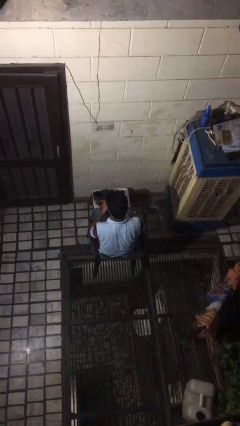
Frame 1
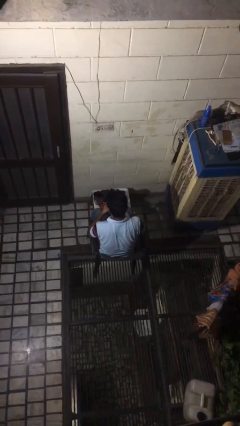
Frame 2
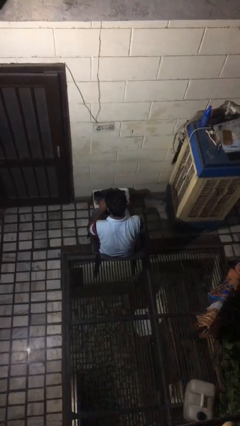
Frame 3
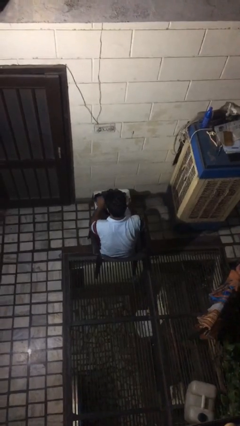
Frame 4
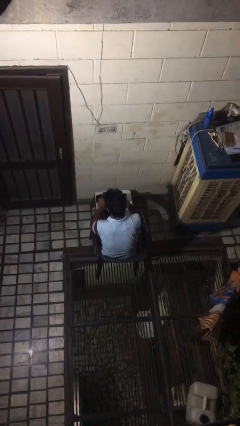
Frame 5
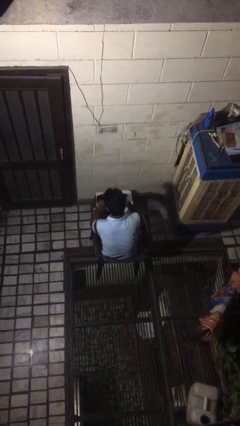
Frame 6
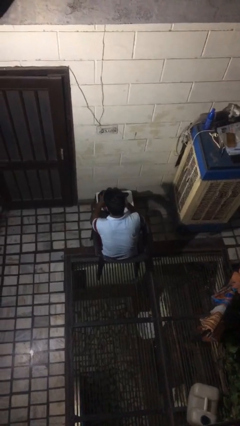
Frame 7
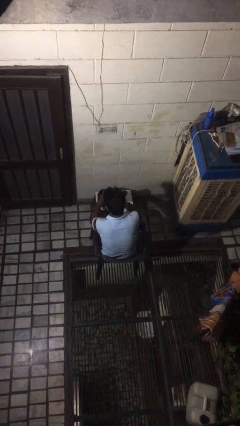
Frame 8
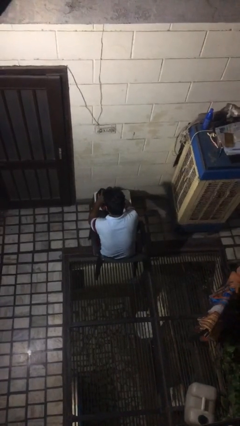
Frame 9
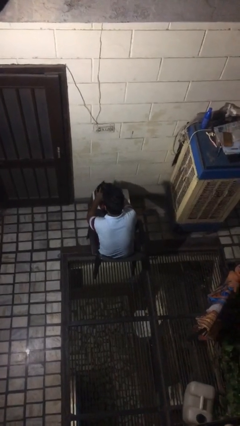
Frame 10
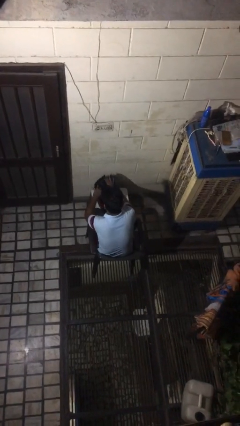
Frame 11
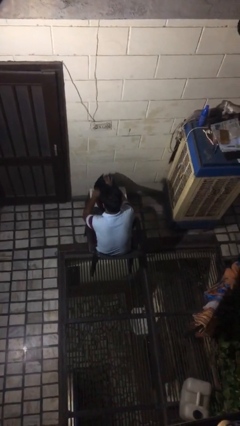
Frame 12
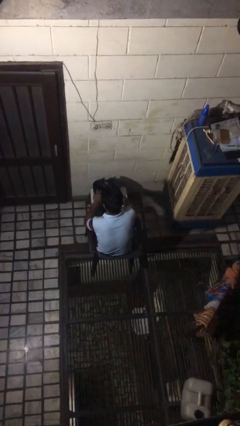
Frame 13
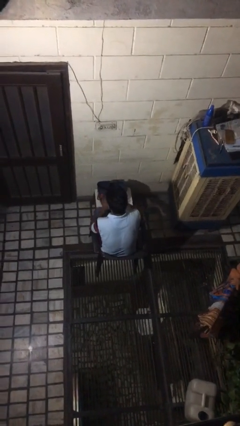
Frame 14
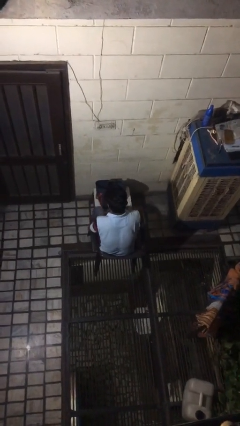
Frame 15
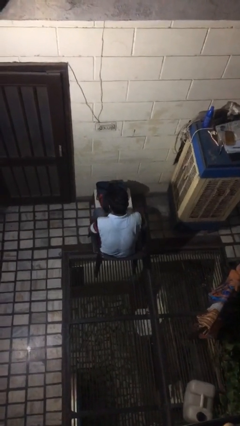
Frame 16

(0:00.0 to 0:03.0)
person puts object into bag

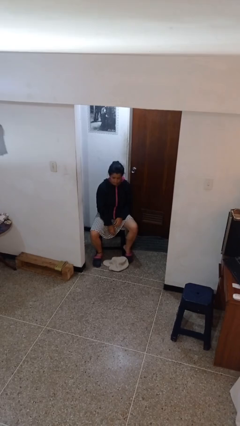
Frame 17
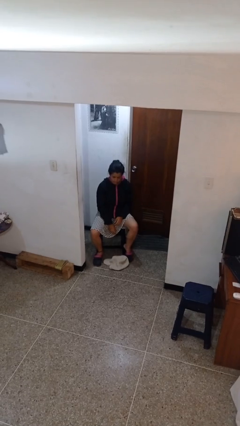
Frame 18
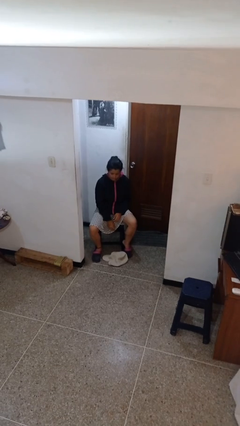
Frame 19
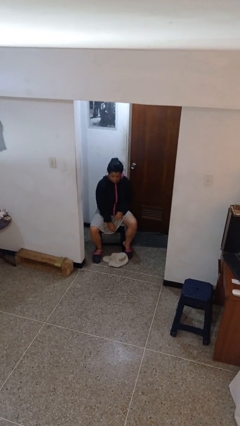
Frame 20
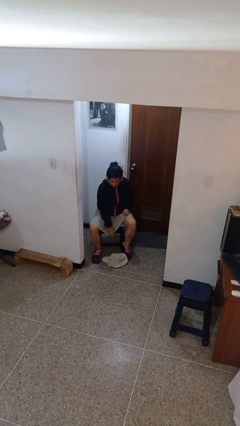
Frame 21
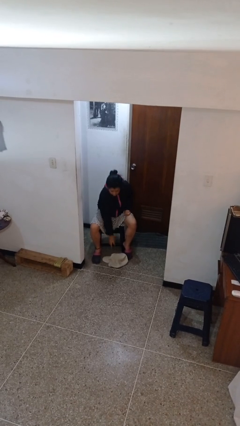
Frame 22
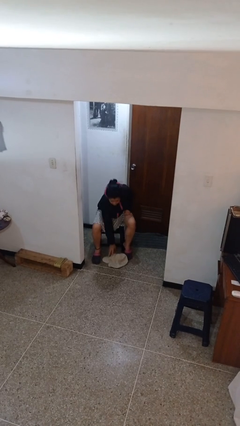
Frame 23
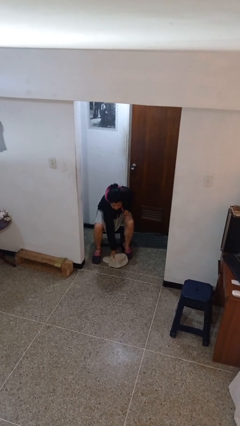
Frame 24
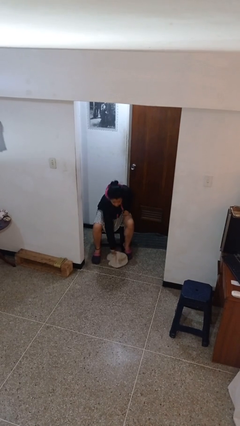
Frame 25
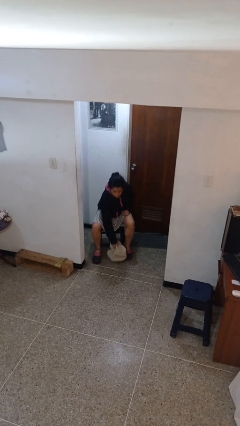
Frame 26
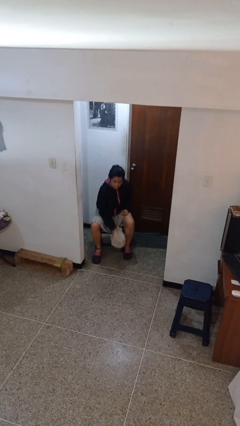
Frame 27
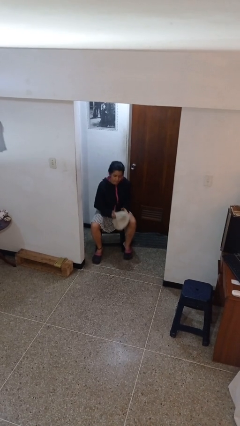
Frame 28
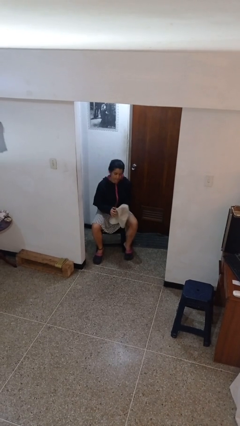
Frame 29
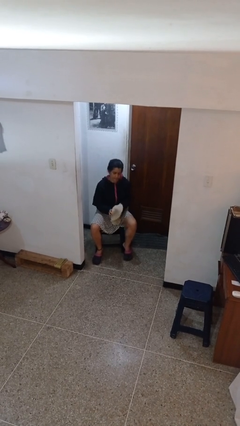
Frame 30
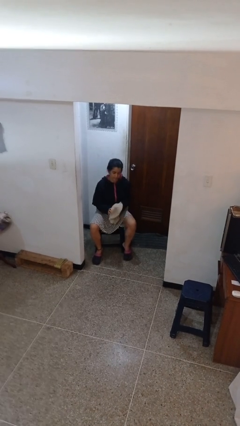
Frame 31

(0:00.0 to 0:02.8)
person picks up object from floor

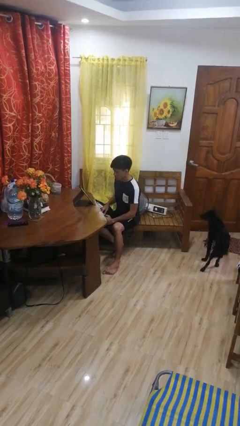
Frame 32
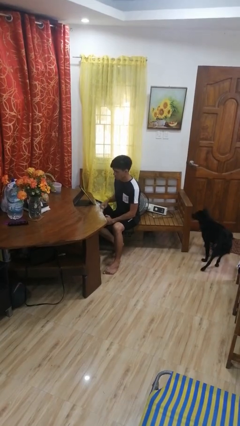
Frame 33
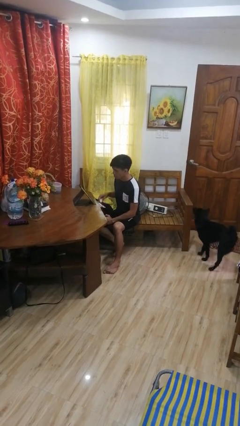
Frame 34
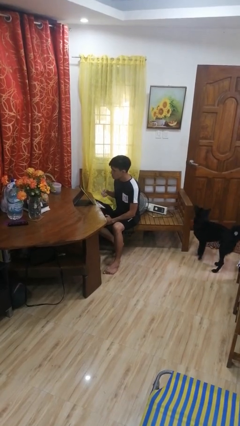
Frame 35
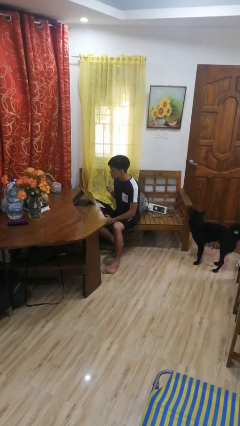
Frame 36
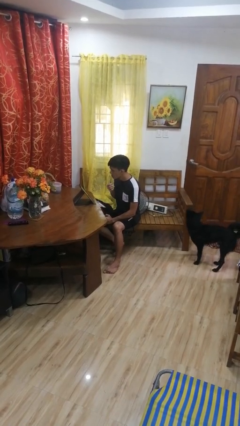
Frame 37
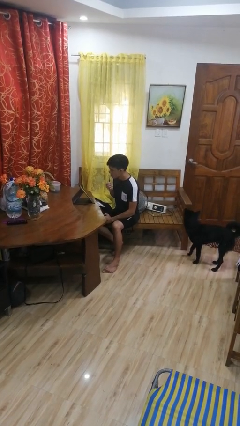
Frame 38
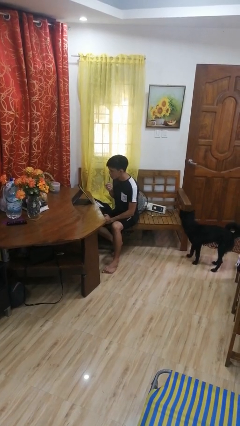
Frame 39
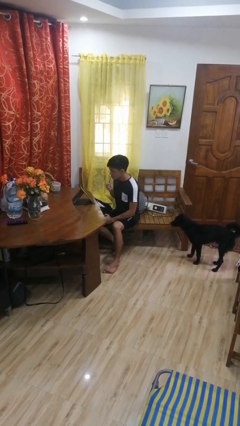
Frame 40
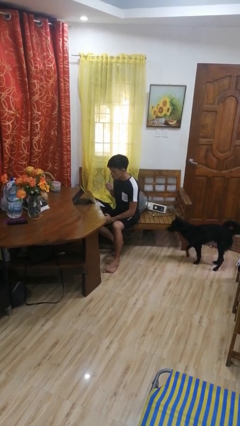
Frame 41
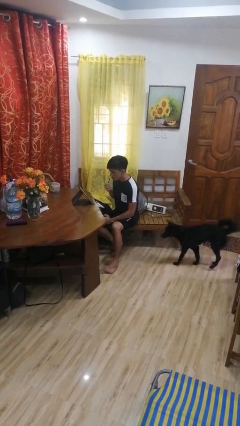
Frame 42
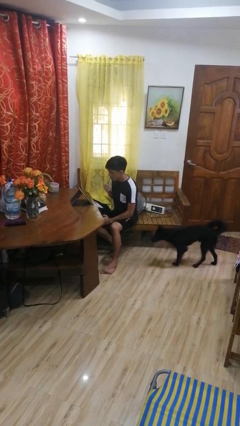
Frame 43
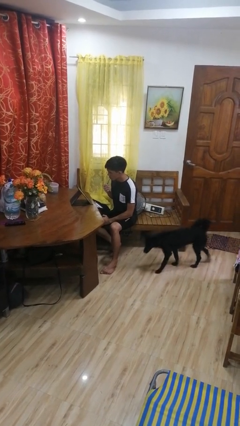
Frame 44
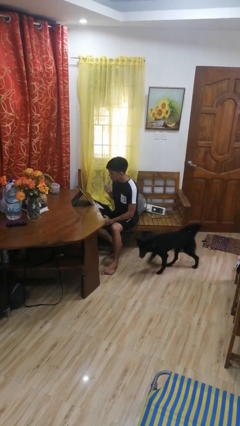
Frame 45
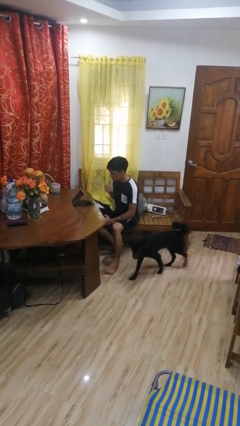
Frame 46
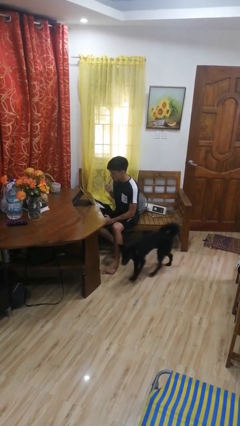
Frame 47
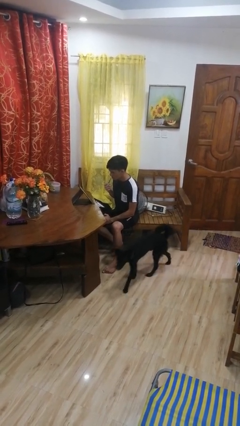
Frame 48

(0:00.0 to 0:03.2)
person applies lip makeup

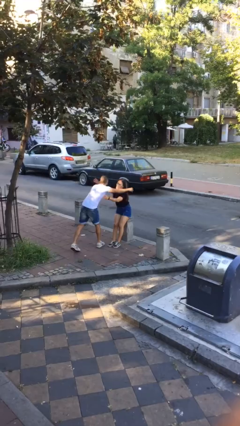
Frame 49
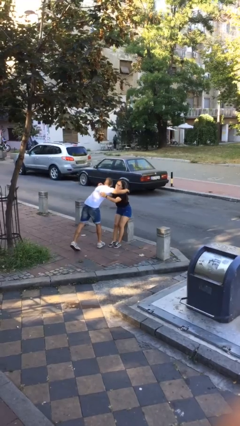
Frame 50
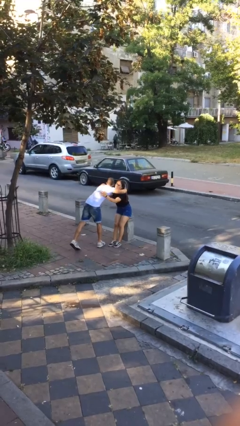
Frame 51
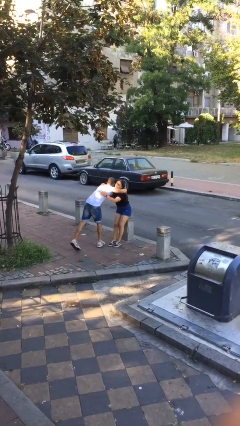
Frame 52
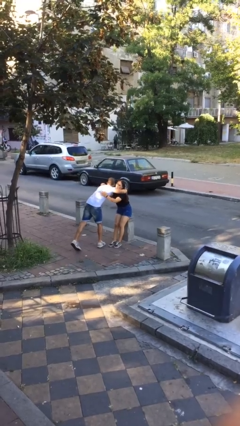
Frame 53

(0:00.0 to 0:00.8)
person embraces person

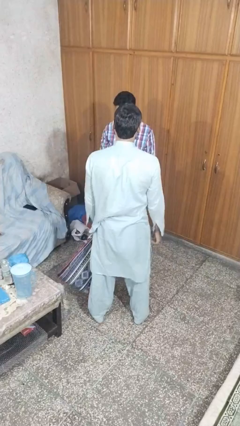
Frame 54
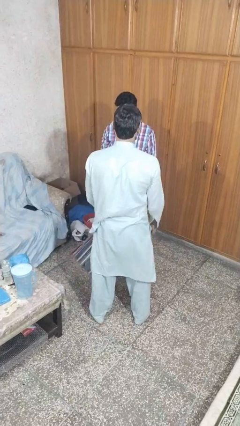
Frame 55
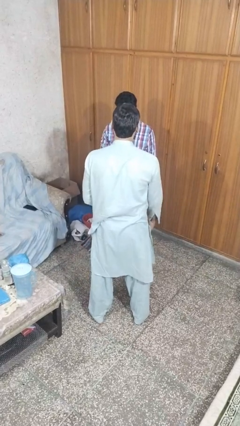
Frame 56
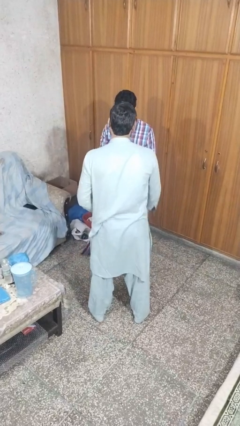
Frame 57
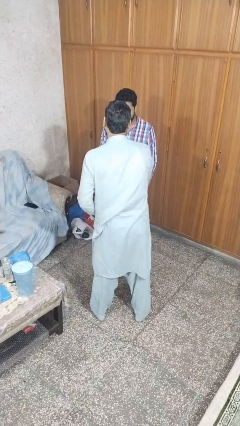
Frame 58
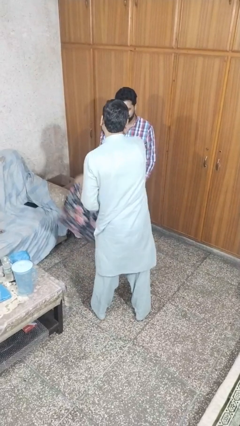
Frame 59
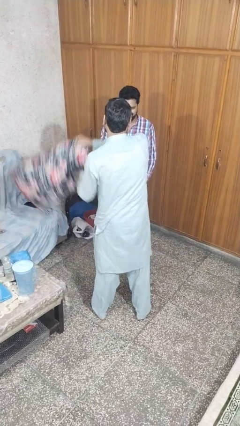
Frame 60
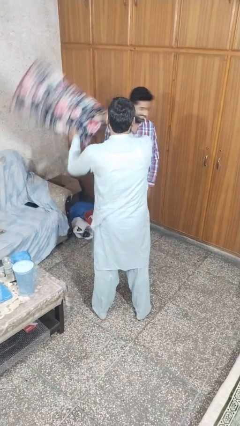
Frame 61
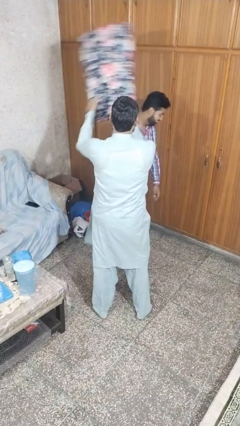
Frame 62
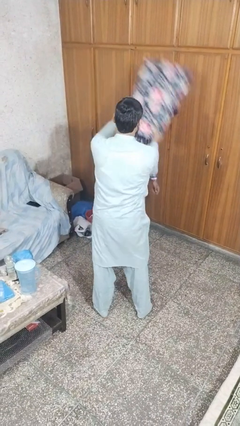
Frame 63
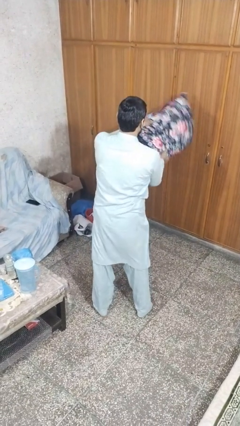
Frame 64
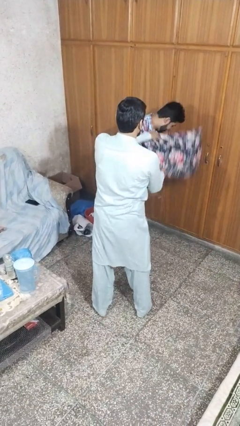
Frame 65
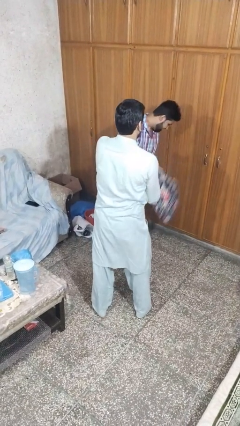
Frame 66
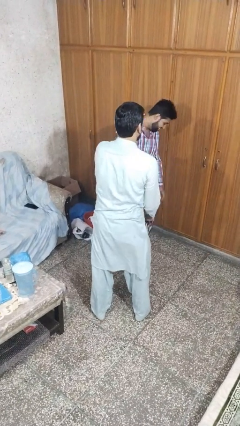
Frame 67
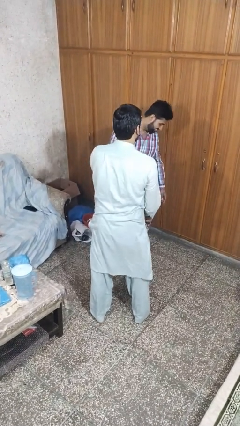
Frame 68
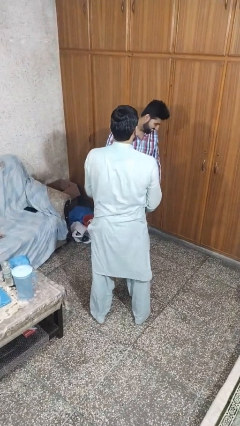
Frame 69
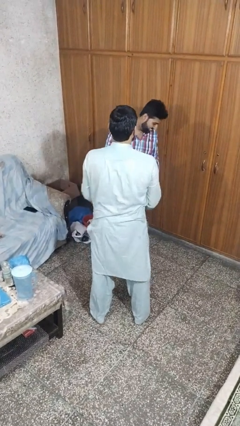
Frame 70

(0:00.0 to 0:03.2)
person hits person with pillow

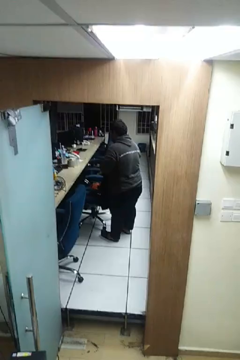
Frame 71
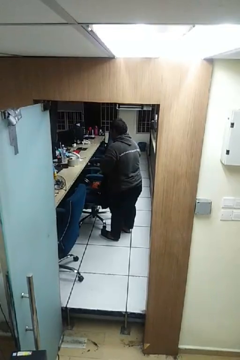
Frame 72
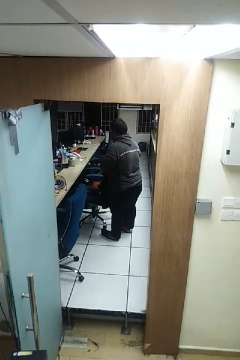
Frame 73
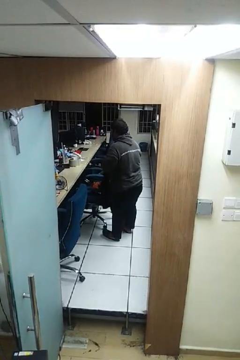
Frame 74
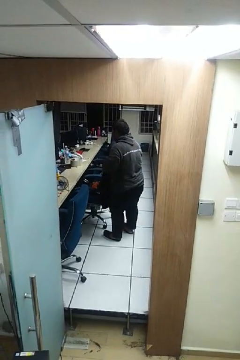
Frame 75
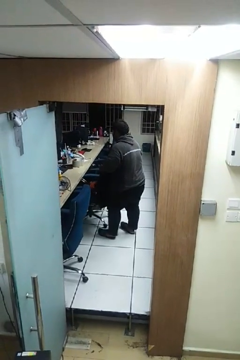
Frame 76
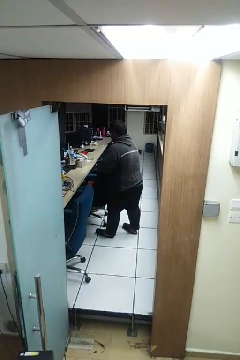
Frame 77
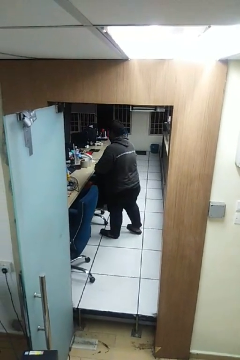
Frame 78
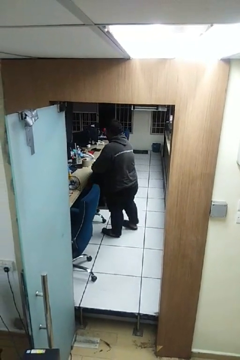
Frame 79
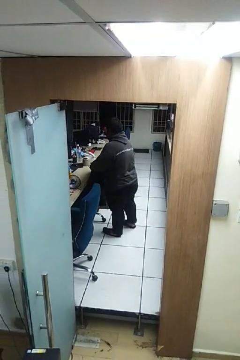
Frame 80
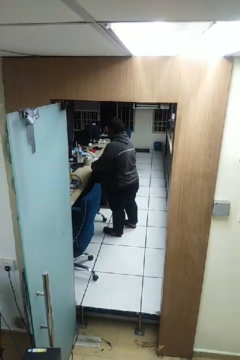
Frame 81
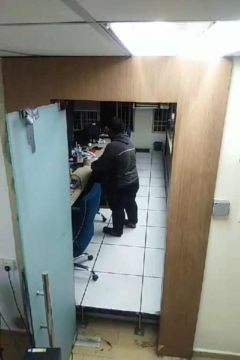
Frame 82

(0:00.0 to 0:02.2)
person pushes in chair

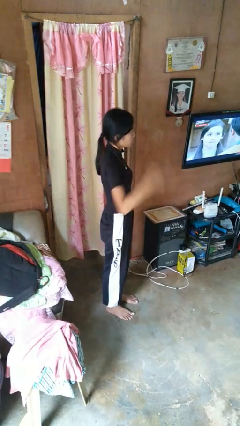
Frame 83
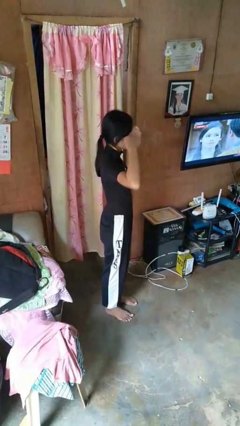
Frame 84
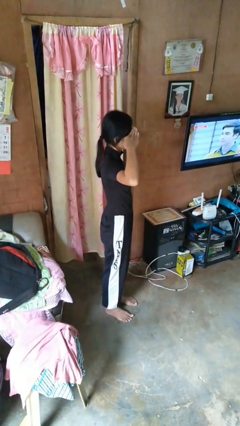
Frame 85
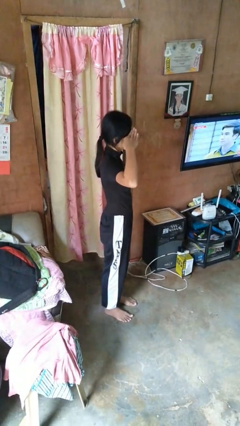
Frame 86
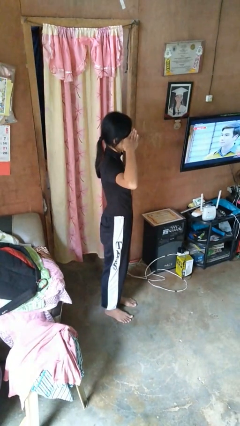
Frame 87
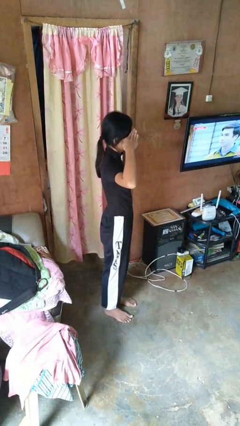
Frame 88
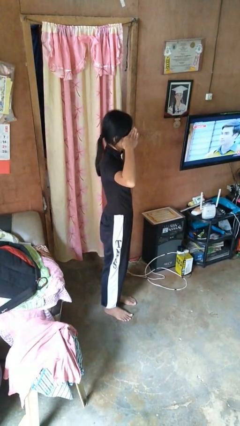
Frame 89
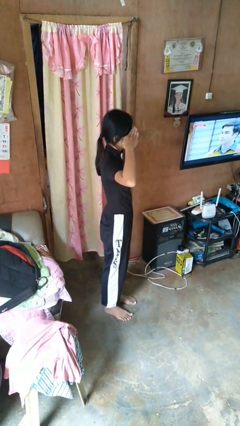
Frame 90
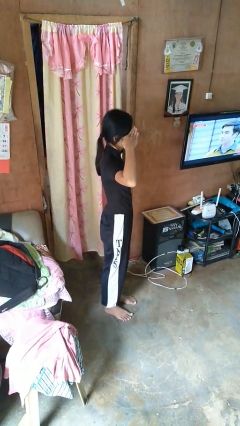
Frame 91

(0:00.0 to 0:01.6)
person salutes

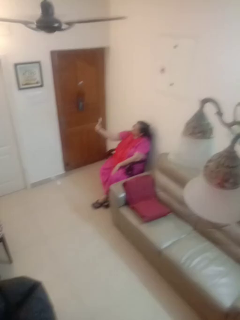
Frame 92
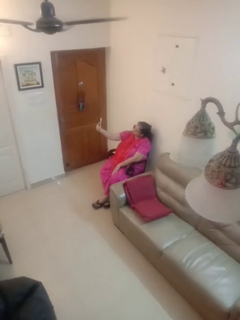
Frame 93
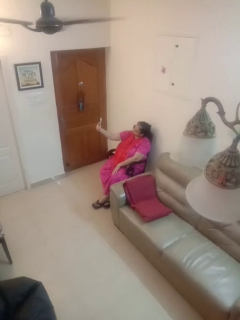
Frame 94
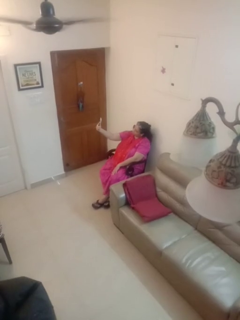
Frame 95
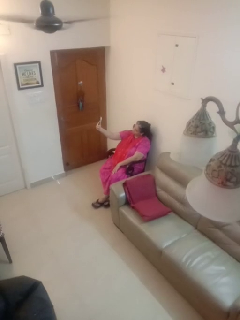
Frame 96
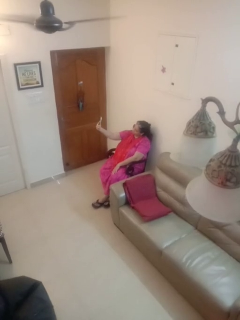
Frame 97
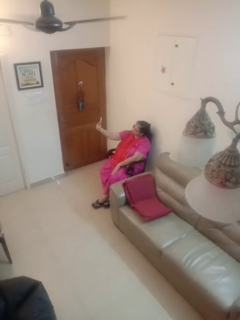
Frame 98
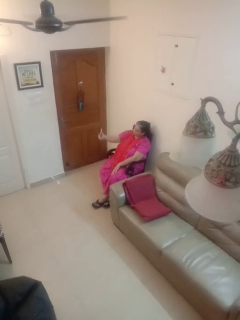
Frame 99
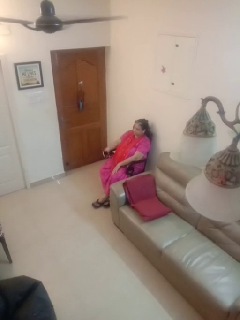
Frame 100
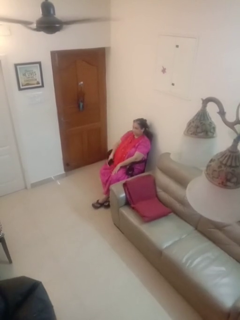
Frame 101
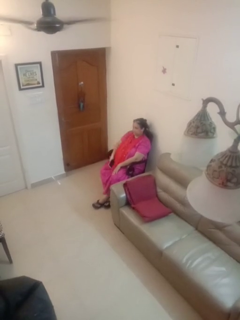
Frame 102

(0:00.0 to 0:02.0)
person takes selfie
